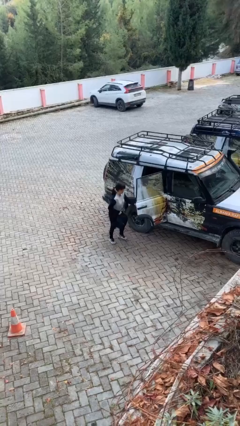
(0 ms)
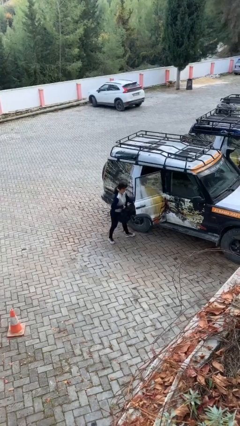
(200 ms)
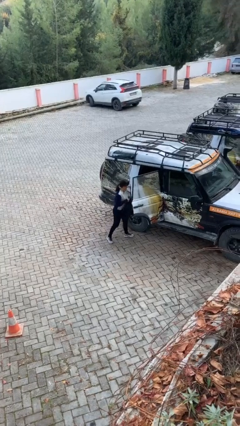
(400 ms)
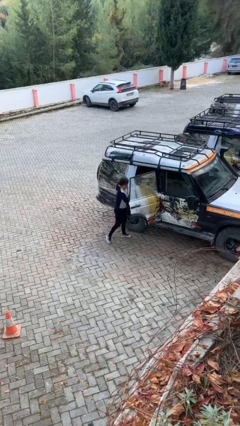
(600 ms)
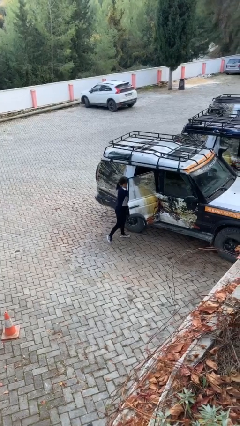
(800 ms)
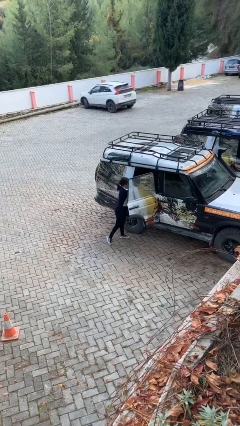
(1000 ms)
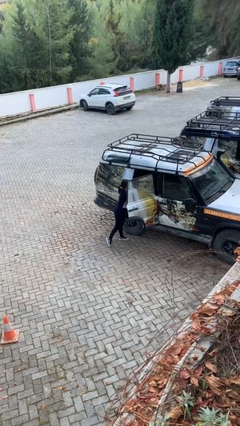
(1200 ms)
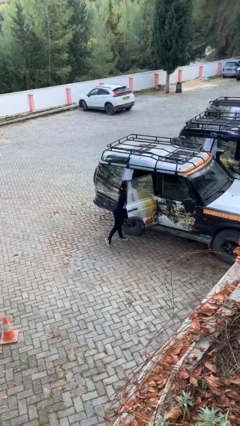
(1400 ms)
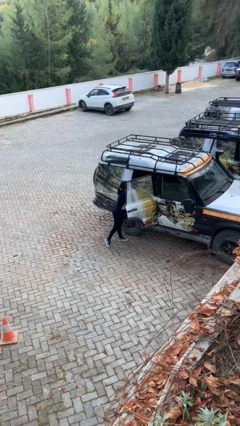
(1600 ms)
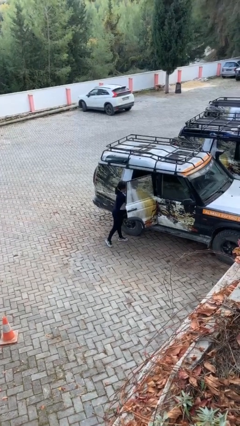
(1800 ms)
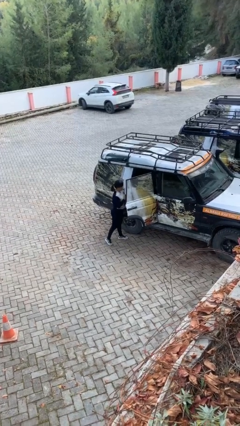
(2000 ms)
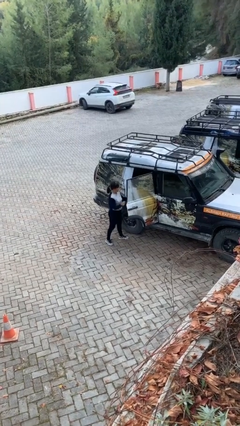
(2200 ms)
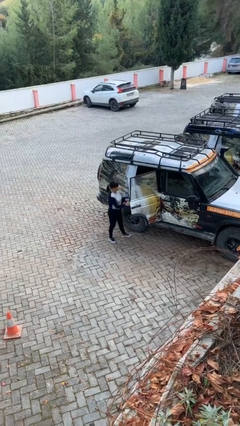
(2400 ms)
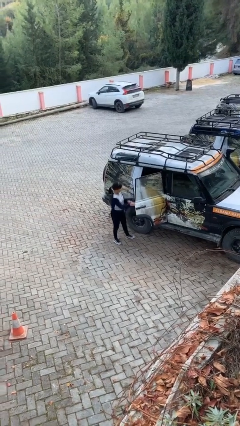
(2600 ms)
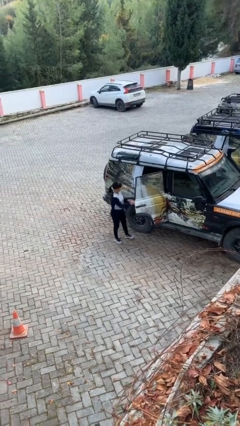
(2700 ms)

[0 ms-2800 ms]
person loads car

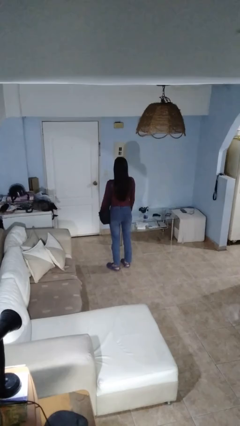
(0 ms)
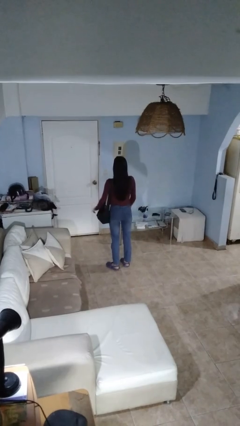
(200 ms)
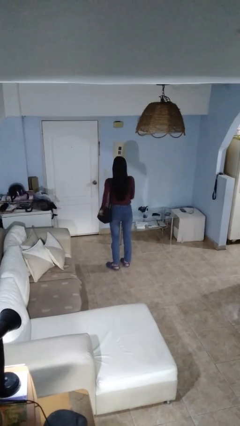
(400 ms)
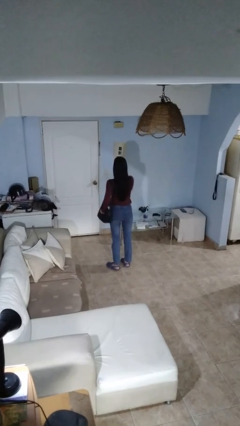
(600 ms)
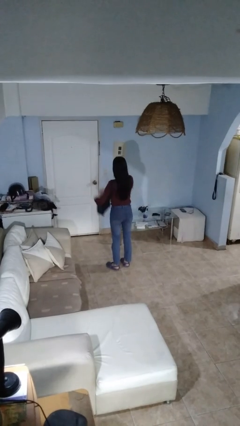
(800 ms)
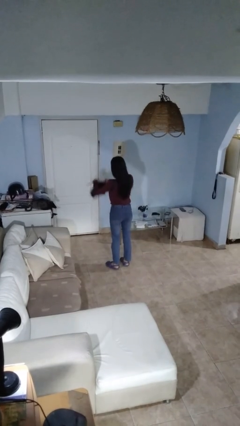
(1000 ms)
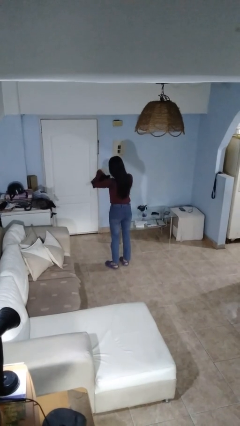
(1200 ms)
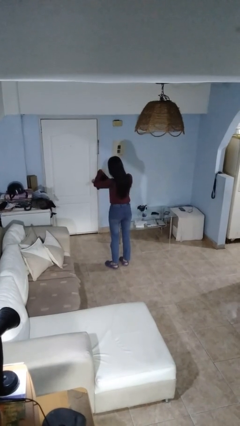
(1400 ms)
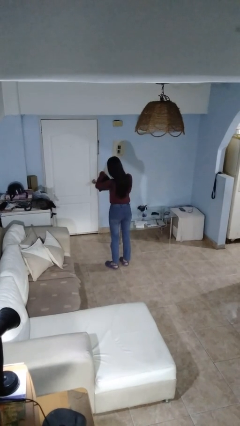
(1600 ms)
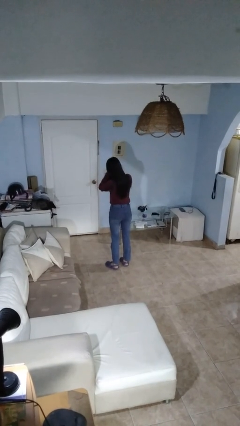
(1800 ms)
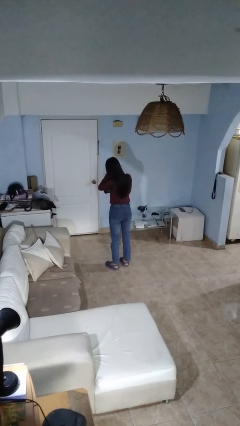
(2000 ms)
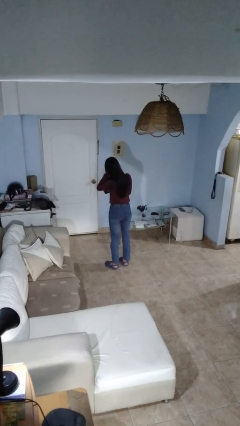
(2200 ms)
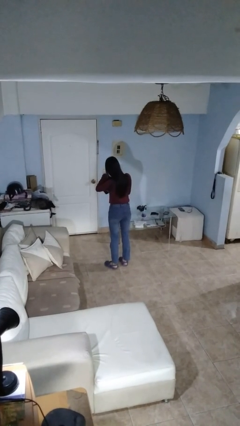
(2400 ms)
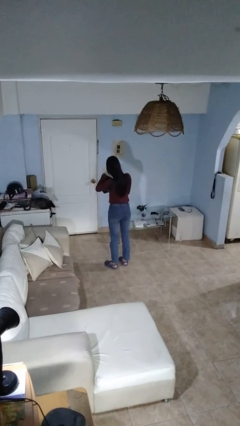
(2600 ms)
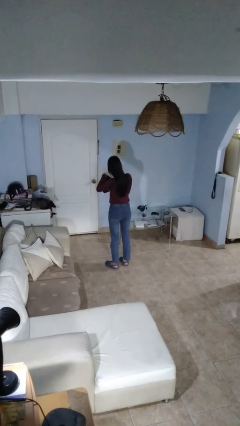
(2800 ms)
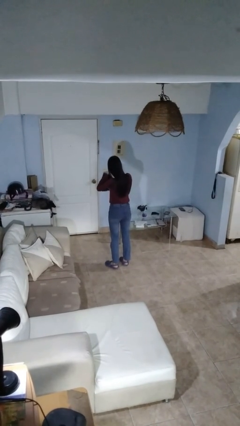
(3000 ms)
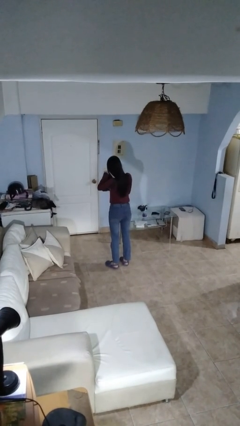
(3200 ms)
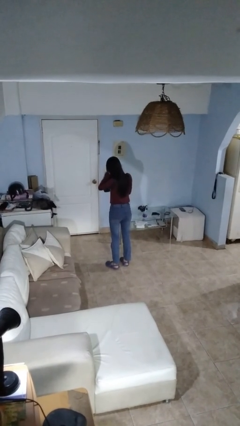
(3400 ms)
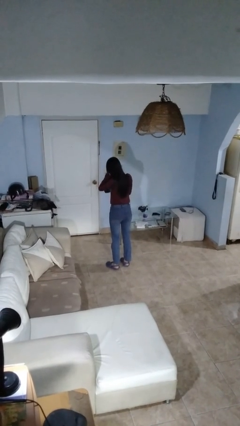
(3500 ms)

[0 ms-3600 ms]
person searches in purse

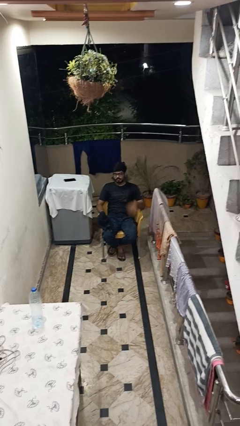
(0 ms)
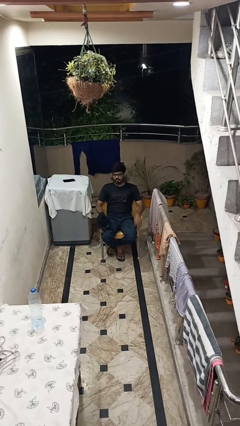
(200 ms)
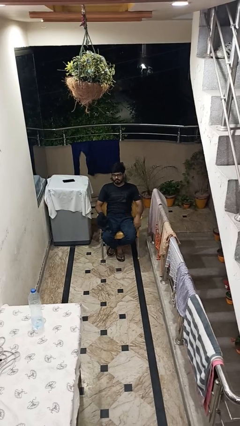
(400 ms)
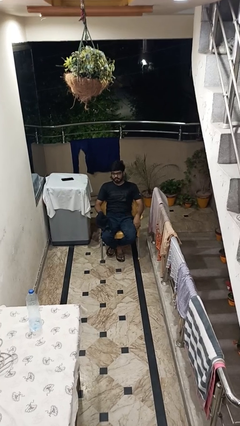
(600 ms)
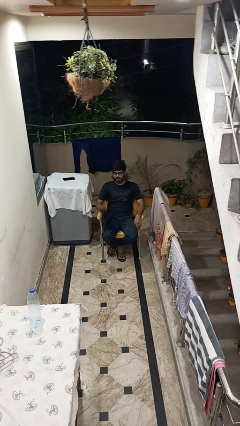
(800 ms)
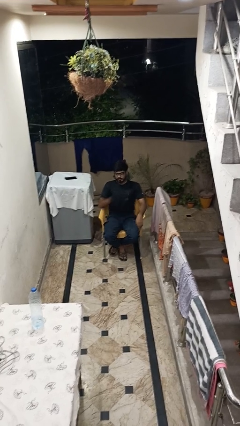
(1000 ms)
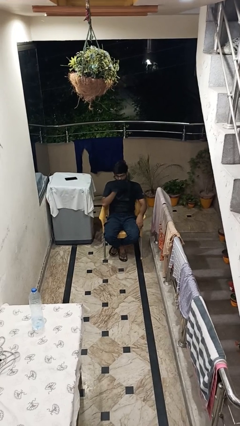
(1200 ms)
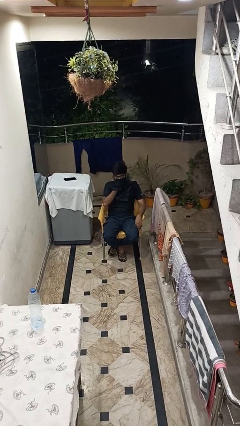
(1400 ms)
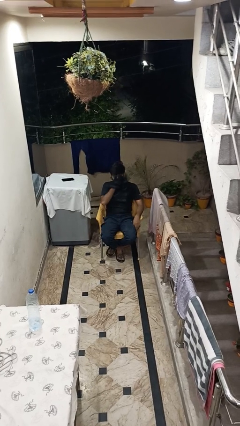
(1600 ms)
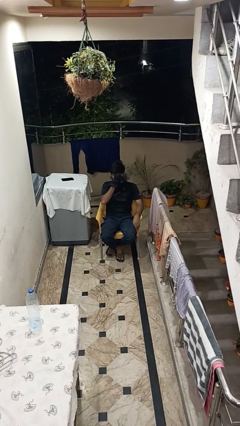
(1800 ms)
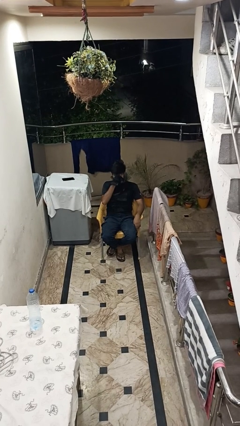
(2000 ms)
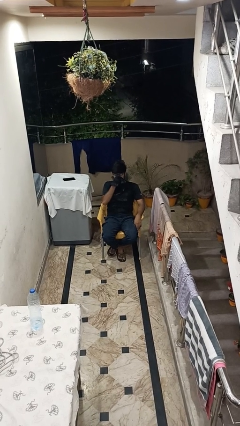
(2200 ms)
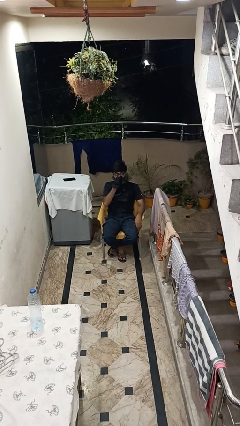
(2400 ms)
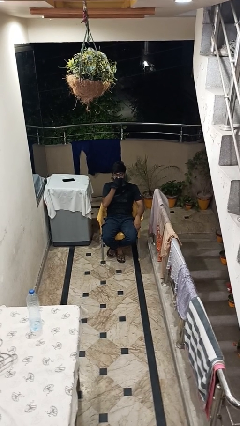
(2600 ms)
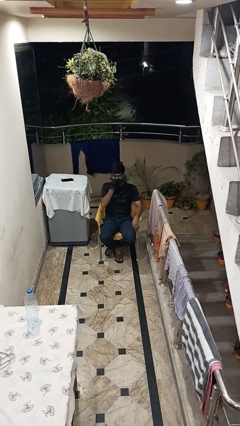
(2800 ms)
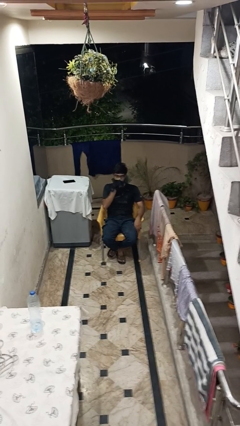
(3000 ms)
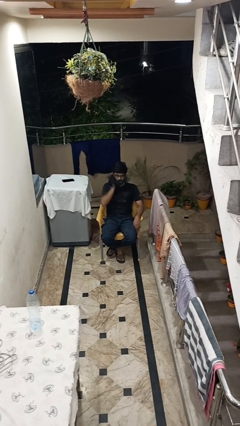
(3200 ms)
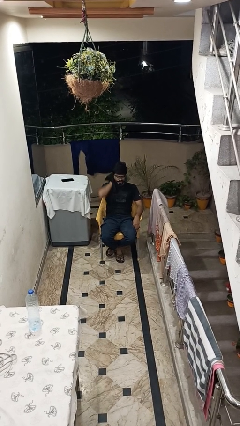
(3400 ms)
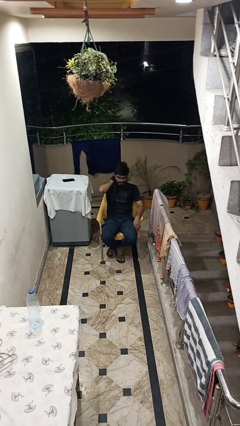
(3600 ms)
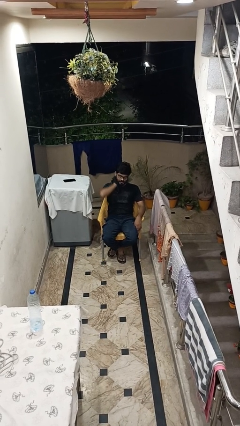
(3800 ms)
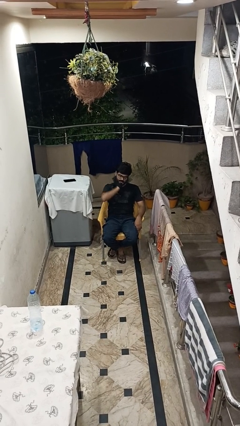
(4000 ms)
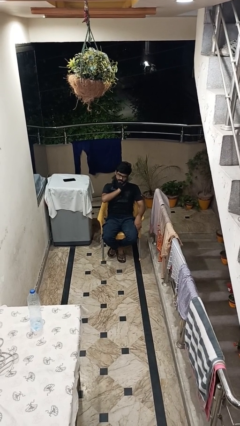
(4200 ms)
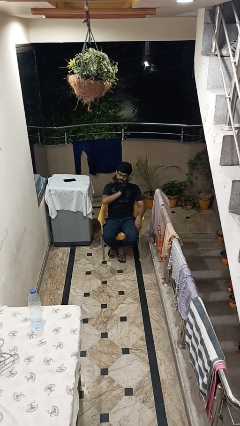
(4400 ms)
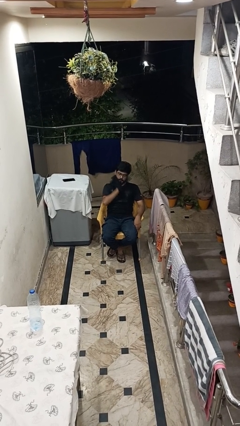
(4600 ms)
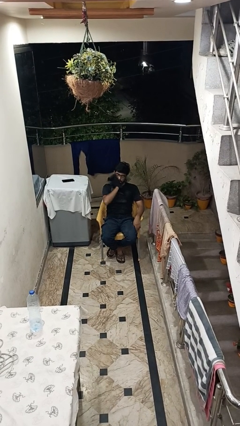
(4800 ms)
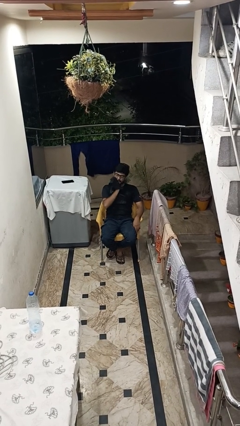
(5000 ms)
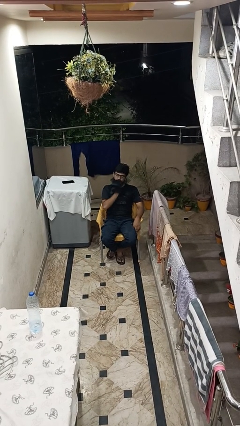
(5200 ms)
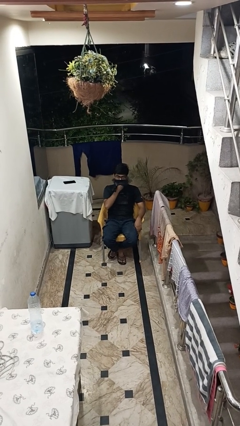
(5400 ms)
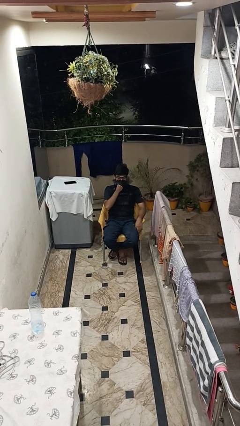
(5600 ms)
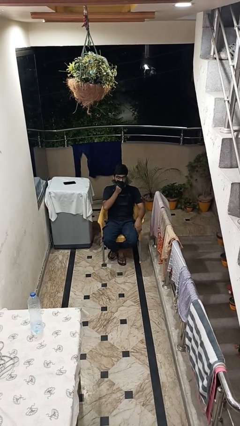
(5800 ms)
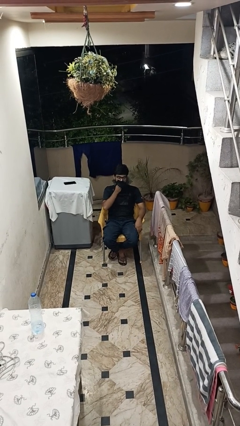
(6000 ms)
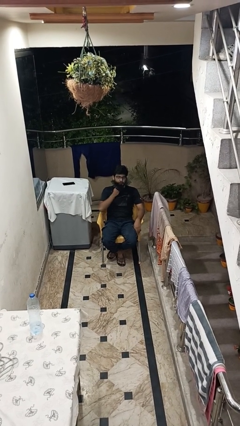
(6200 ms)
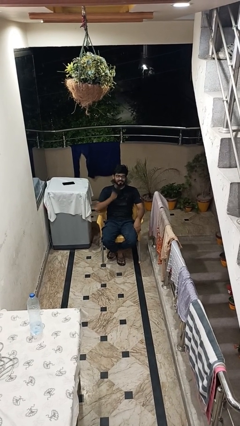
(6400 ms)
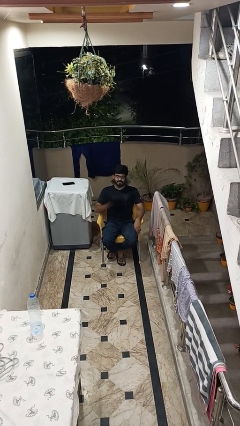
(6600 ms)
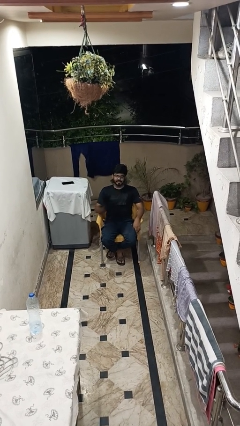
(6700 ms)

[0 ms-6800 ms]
person wipes mouth with napkin

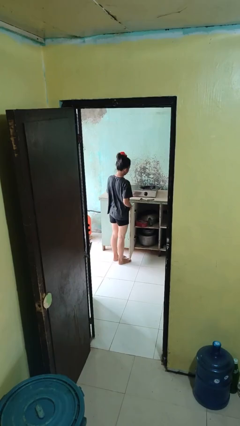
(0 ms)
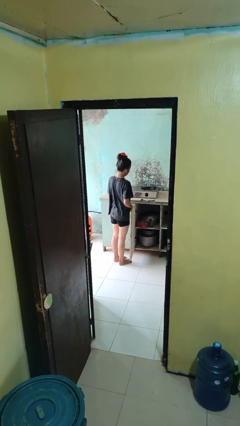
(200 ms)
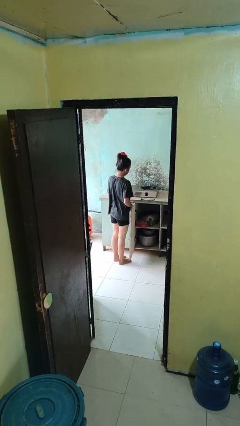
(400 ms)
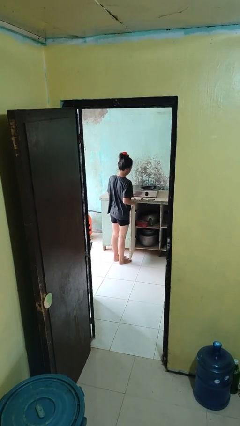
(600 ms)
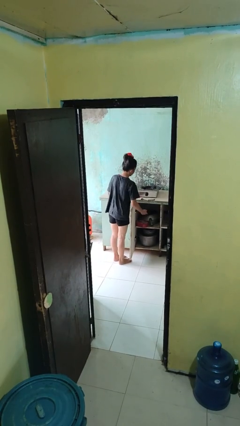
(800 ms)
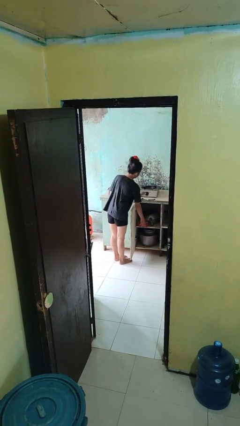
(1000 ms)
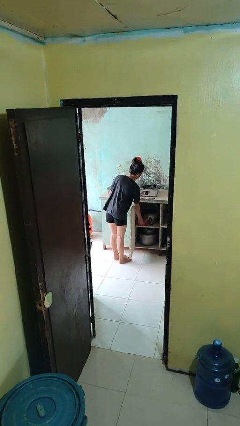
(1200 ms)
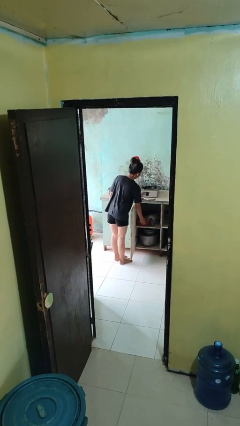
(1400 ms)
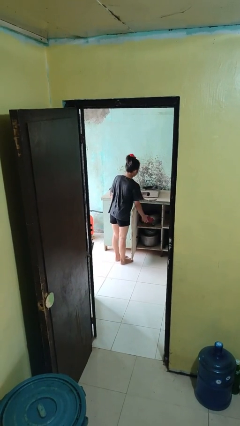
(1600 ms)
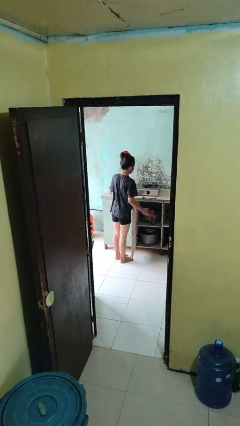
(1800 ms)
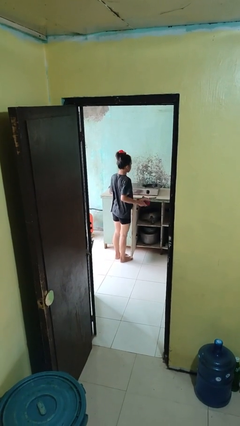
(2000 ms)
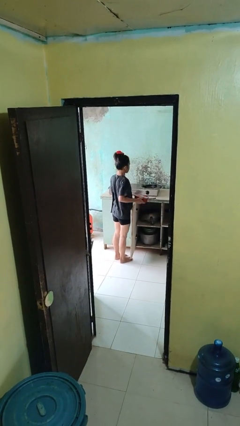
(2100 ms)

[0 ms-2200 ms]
person takes object from cabinet

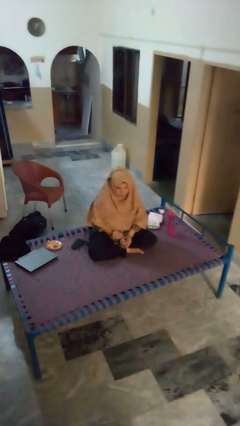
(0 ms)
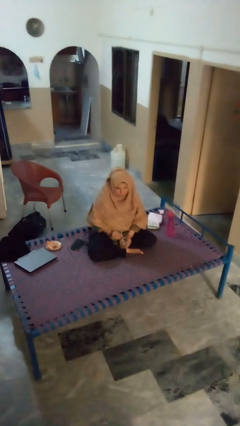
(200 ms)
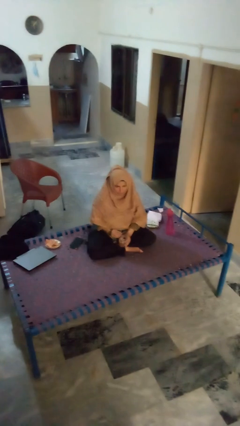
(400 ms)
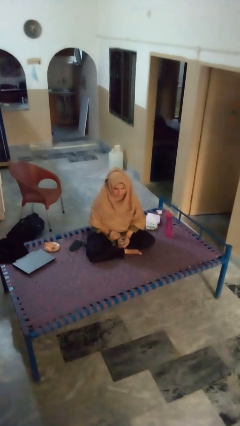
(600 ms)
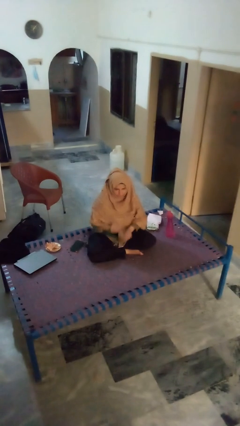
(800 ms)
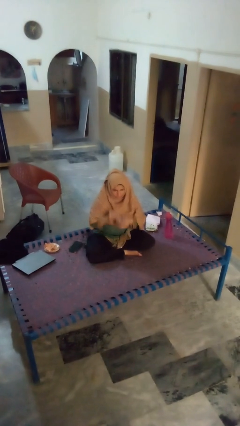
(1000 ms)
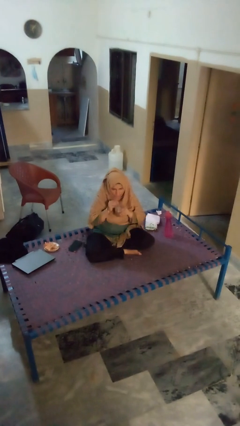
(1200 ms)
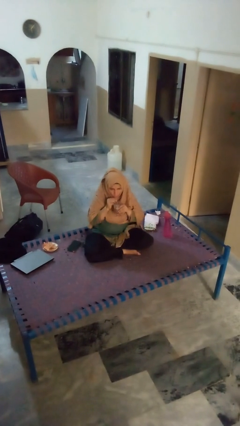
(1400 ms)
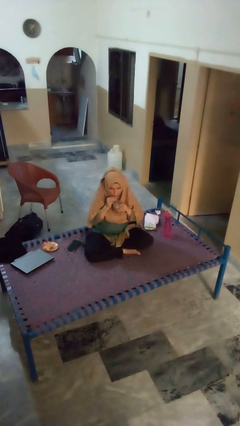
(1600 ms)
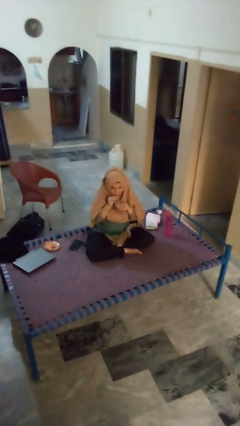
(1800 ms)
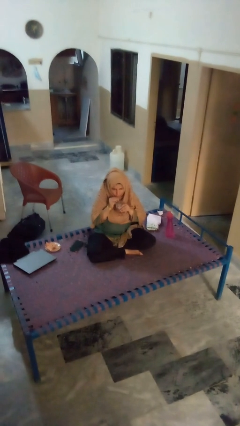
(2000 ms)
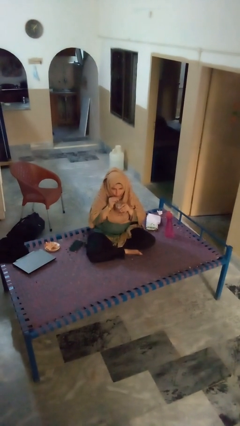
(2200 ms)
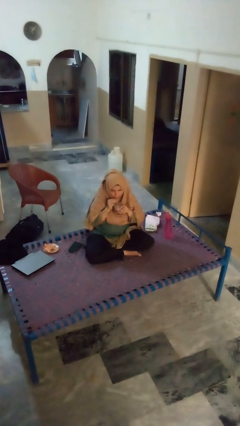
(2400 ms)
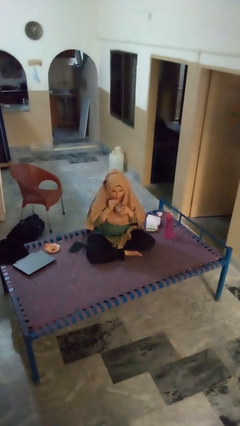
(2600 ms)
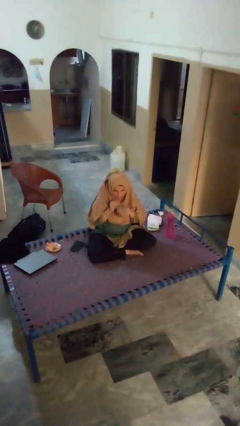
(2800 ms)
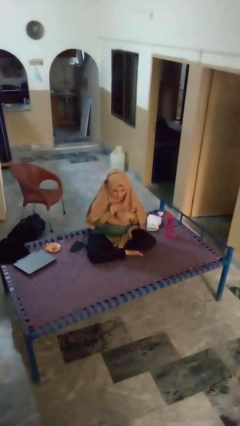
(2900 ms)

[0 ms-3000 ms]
person drinks from straw
